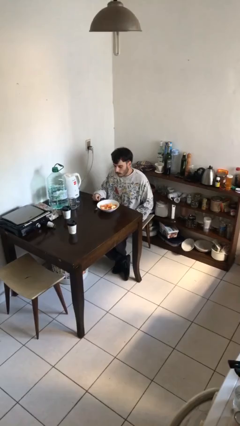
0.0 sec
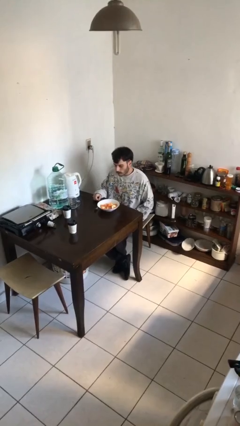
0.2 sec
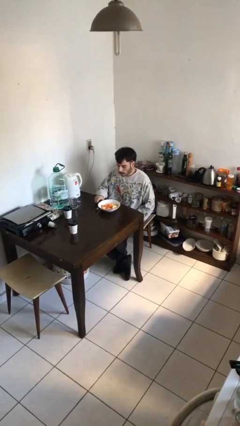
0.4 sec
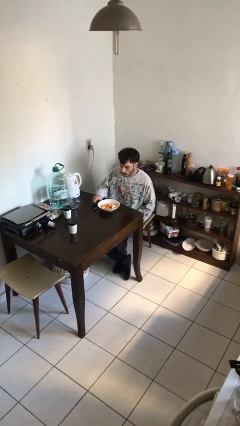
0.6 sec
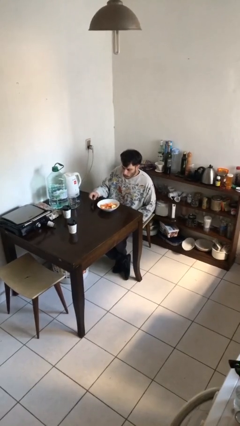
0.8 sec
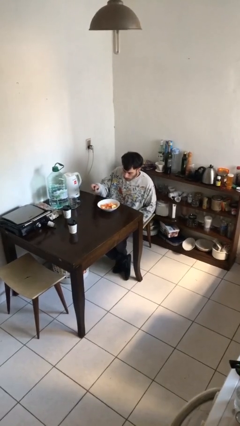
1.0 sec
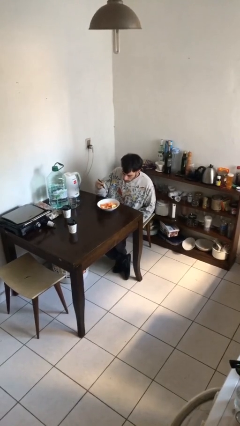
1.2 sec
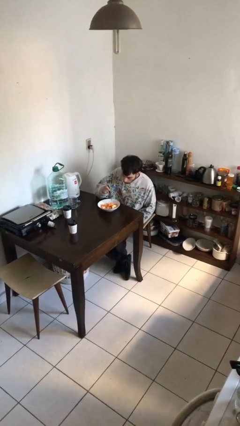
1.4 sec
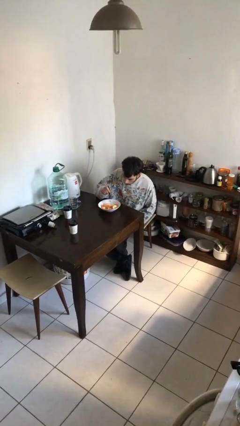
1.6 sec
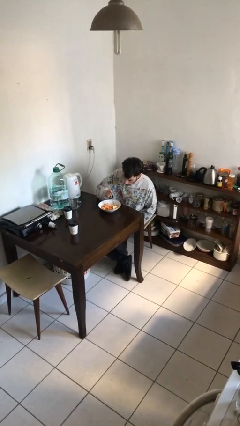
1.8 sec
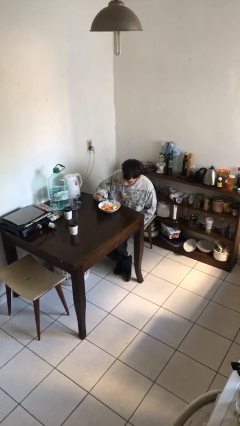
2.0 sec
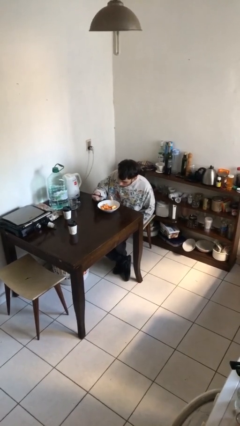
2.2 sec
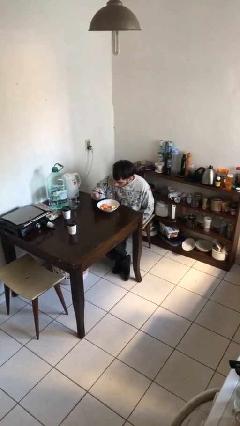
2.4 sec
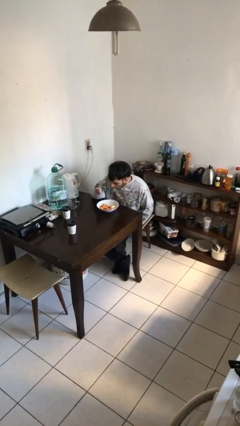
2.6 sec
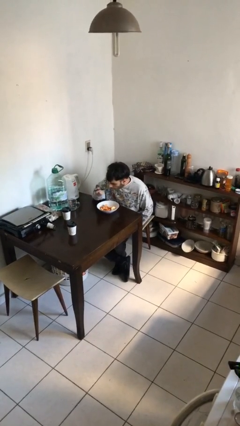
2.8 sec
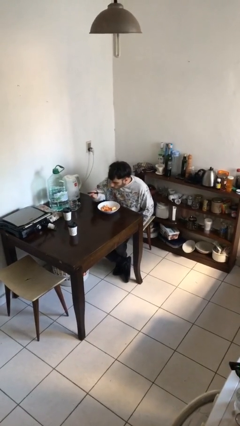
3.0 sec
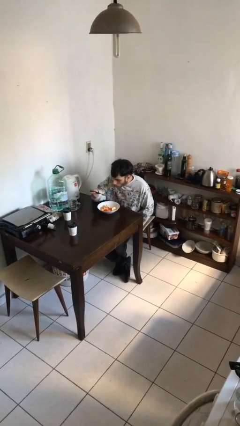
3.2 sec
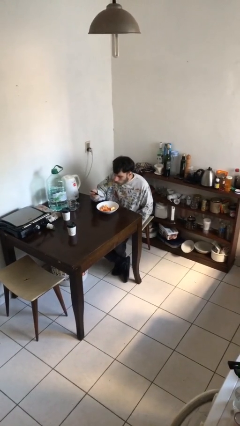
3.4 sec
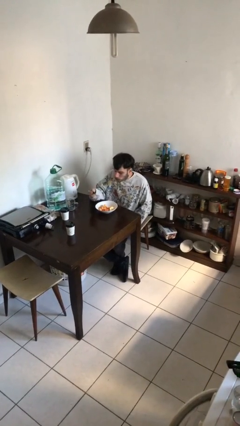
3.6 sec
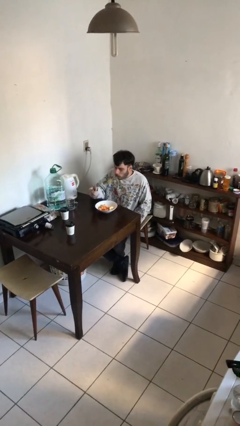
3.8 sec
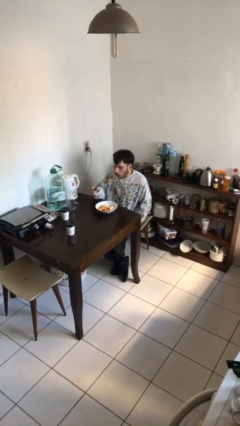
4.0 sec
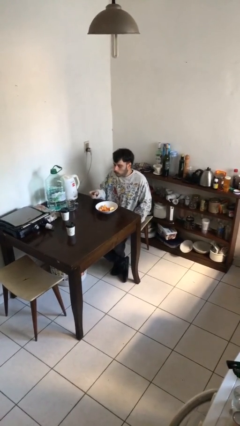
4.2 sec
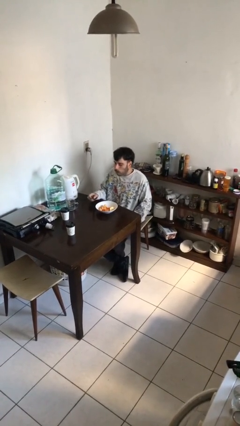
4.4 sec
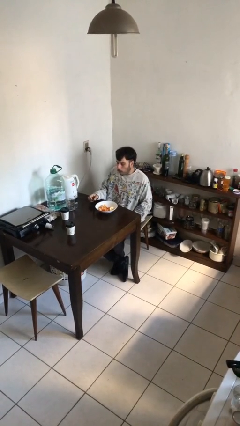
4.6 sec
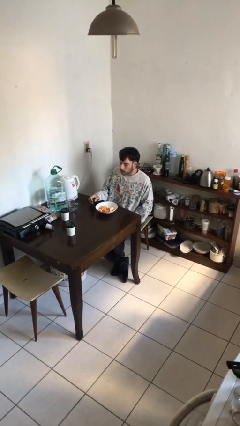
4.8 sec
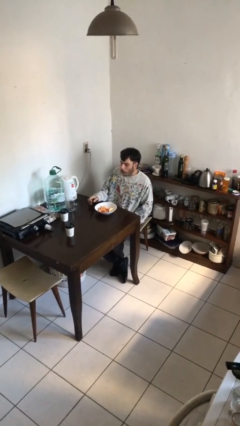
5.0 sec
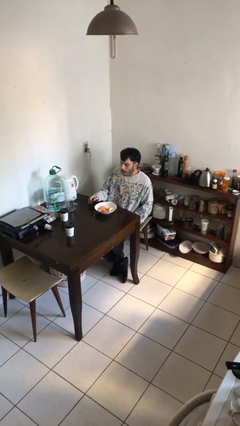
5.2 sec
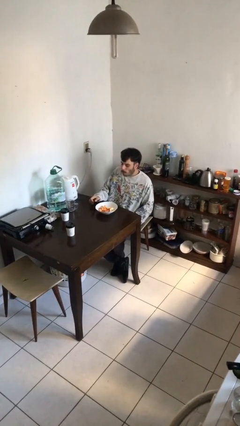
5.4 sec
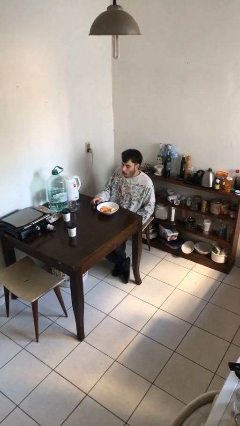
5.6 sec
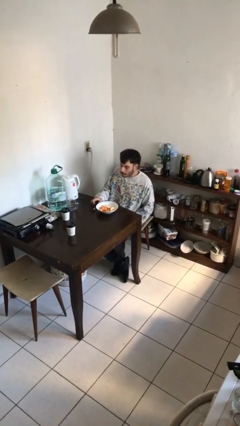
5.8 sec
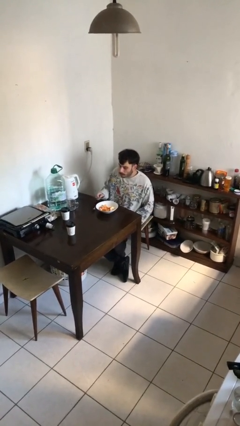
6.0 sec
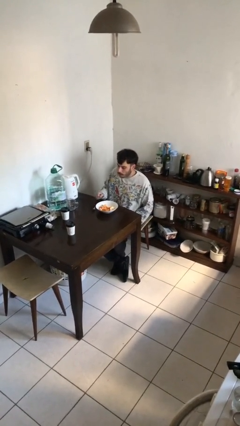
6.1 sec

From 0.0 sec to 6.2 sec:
person eats with utensil

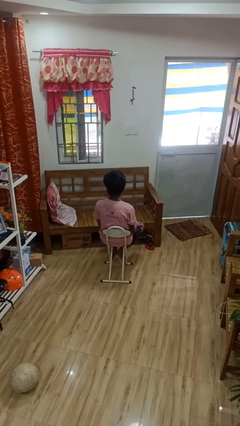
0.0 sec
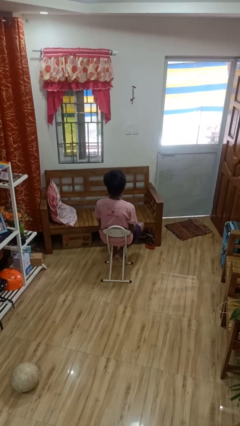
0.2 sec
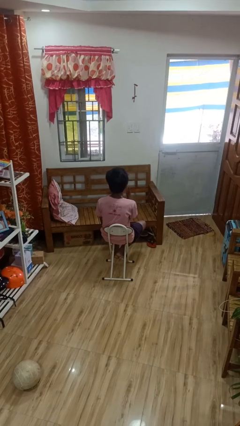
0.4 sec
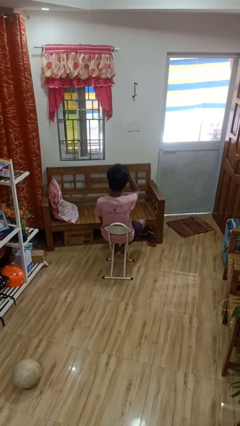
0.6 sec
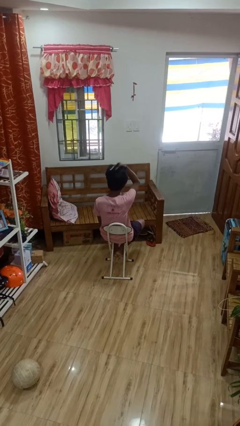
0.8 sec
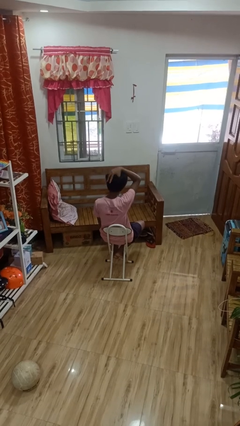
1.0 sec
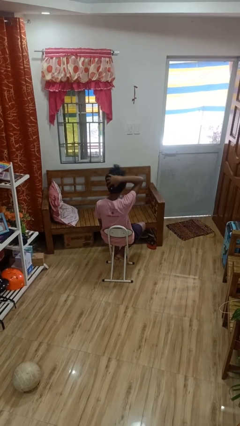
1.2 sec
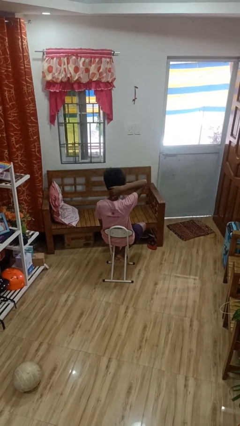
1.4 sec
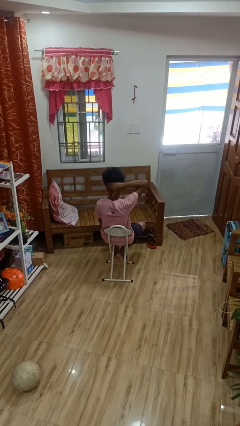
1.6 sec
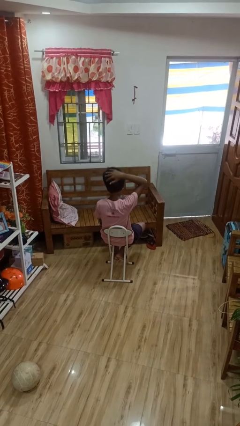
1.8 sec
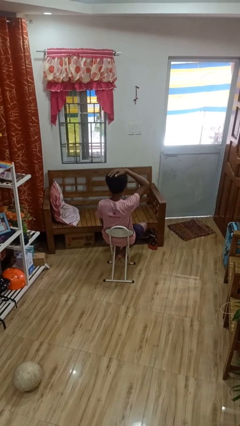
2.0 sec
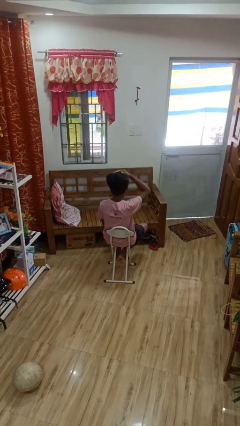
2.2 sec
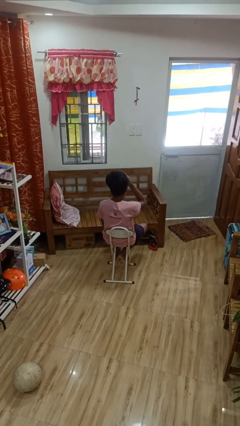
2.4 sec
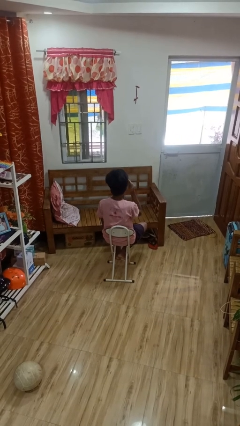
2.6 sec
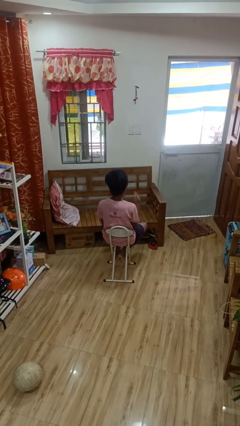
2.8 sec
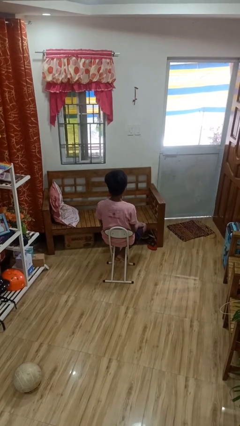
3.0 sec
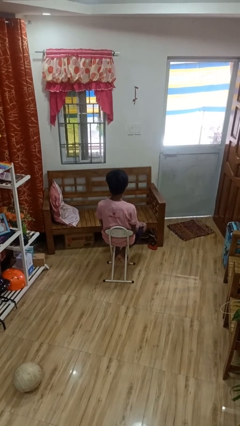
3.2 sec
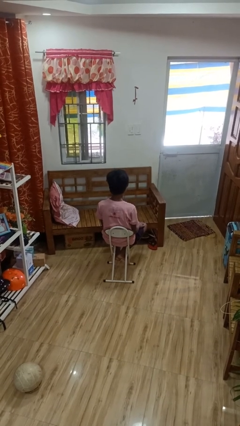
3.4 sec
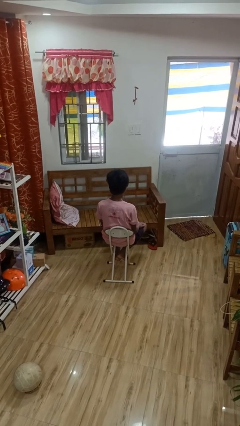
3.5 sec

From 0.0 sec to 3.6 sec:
person strokes hair

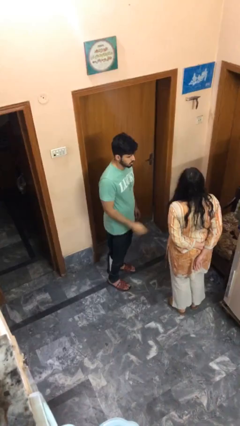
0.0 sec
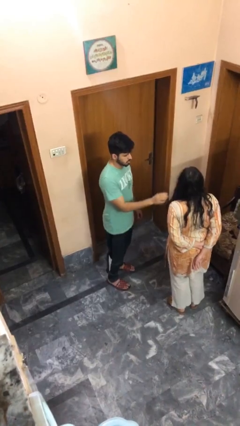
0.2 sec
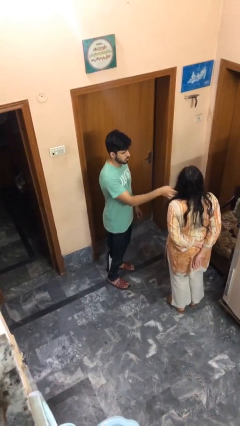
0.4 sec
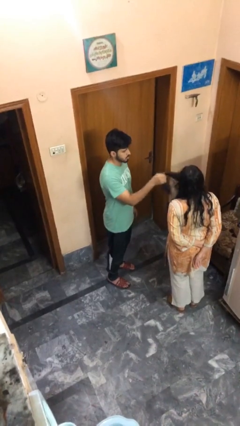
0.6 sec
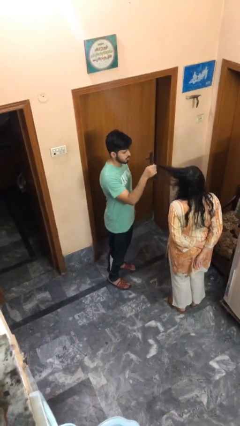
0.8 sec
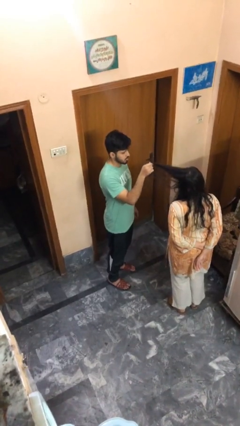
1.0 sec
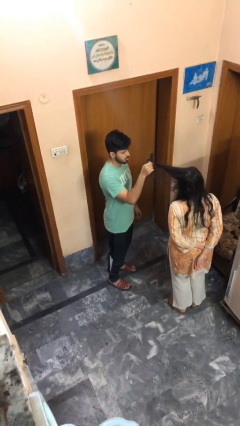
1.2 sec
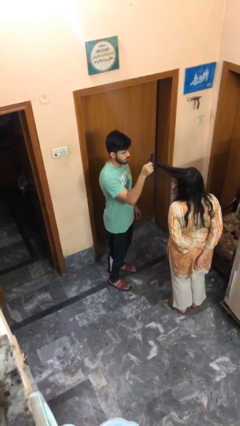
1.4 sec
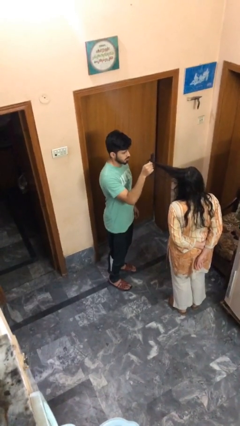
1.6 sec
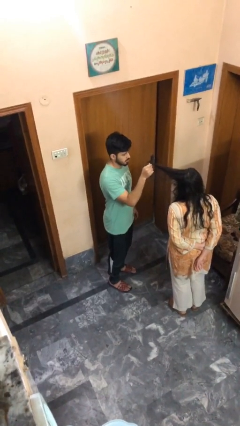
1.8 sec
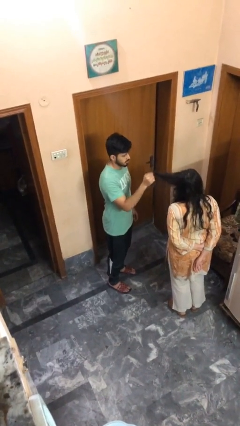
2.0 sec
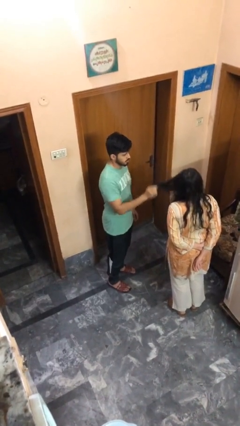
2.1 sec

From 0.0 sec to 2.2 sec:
person grabs person by hair

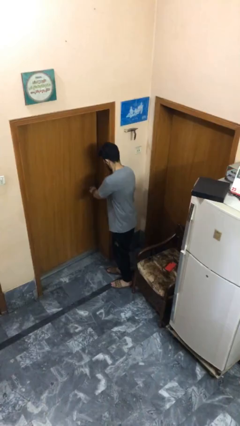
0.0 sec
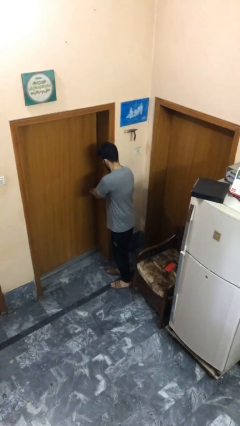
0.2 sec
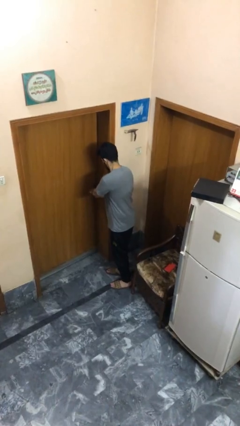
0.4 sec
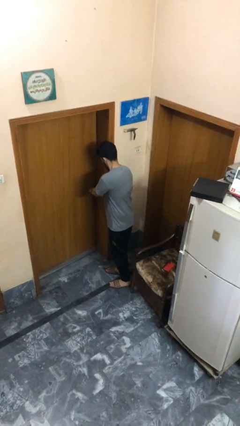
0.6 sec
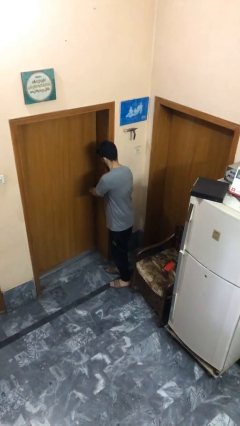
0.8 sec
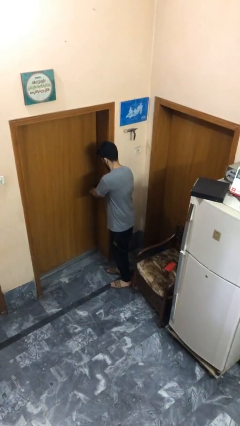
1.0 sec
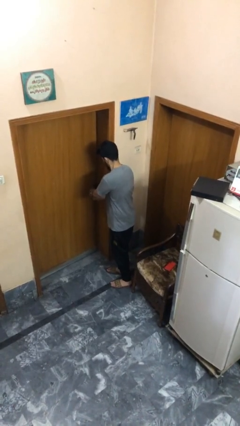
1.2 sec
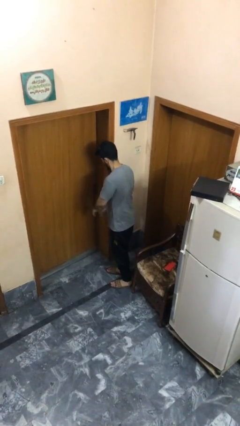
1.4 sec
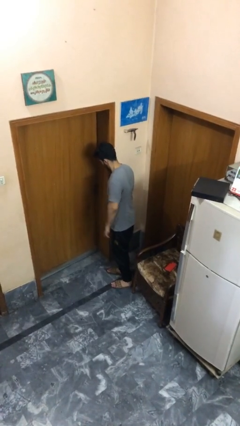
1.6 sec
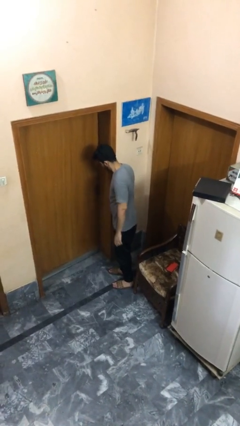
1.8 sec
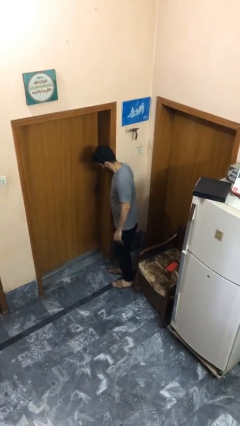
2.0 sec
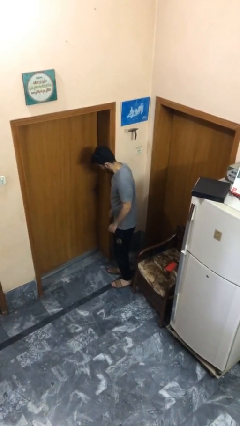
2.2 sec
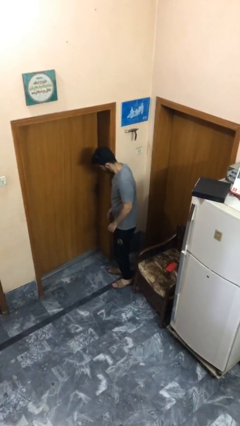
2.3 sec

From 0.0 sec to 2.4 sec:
person locks door with keys

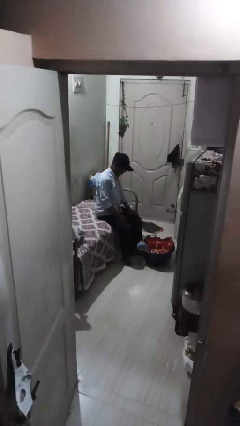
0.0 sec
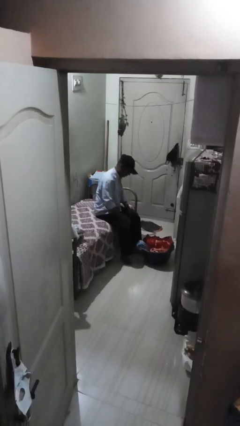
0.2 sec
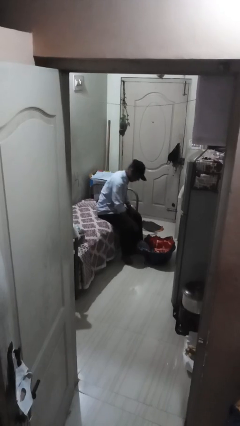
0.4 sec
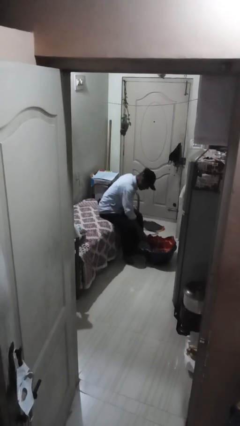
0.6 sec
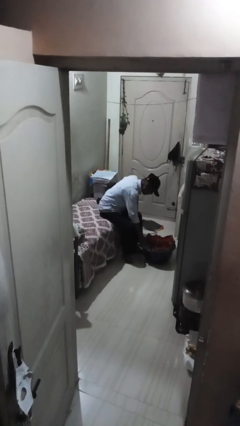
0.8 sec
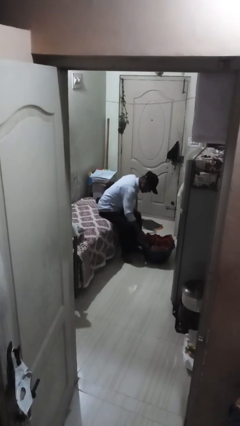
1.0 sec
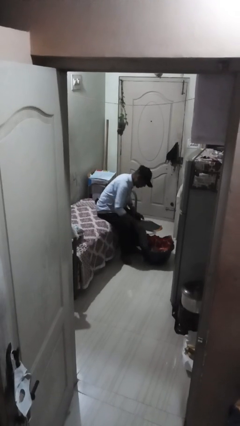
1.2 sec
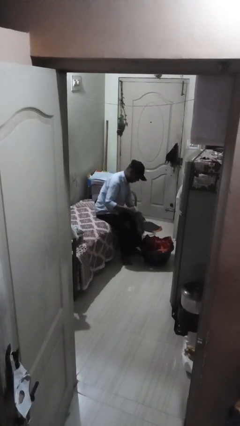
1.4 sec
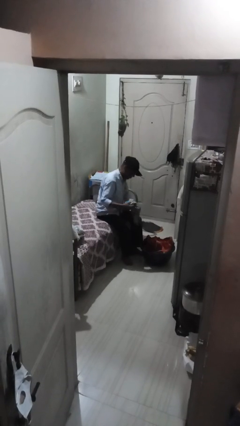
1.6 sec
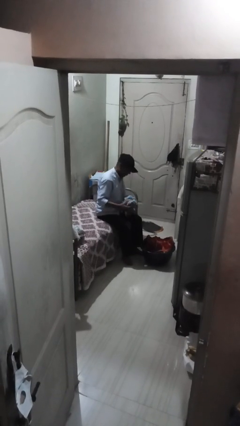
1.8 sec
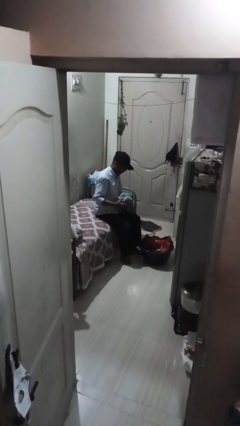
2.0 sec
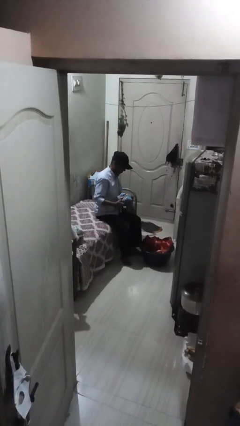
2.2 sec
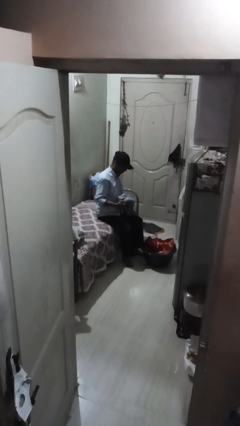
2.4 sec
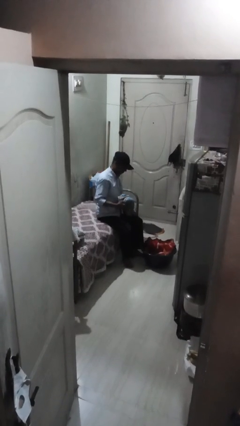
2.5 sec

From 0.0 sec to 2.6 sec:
person takes object from basket

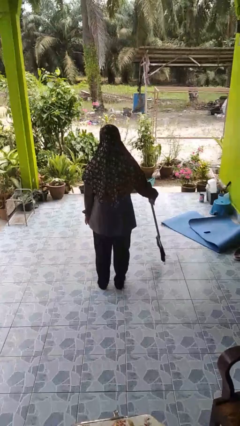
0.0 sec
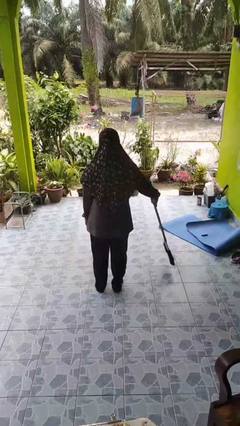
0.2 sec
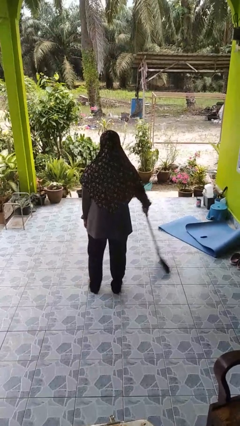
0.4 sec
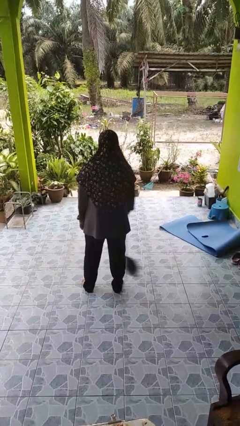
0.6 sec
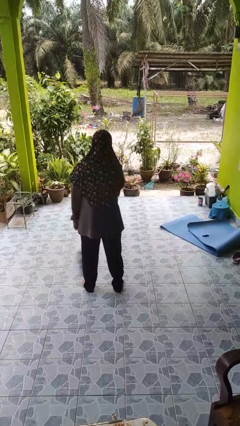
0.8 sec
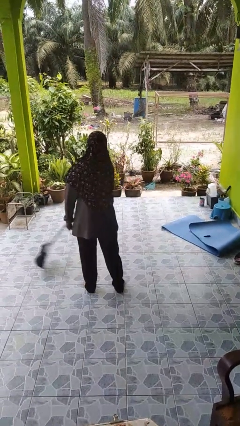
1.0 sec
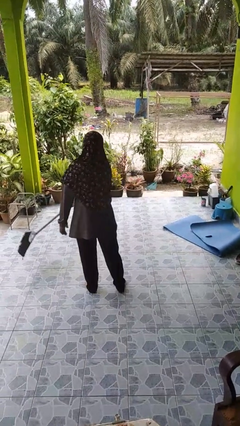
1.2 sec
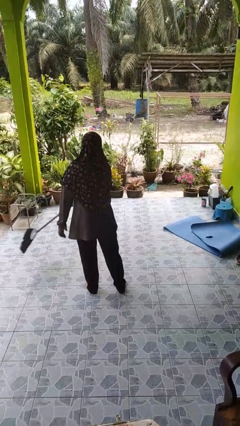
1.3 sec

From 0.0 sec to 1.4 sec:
person sweeps floor
